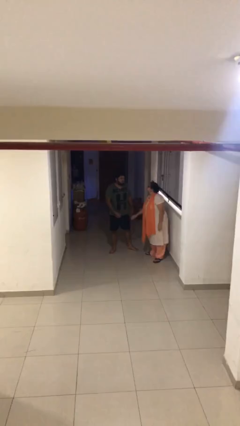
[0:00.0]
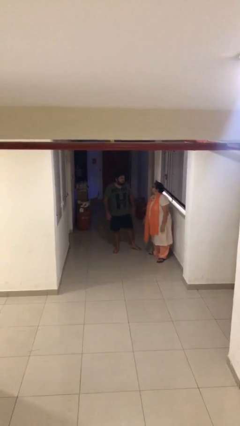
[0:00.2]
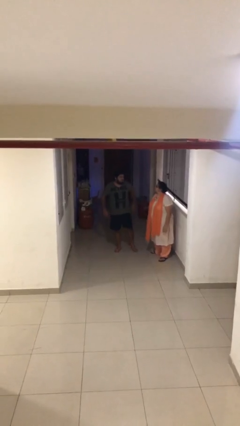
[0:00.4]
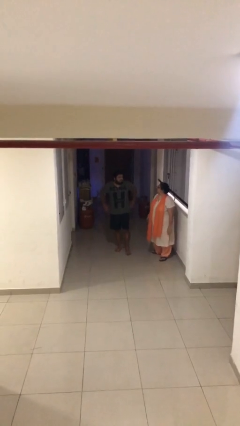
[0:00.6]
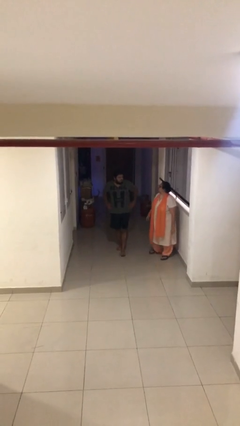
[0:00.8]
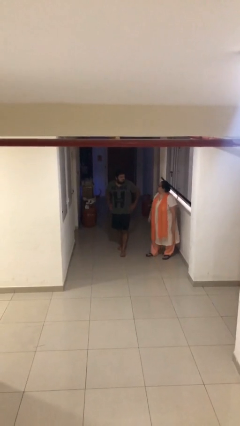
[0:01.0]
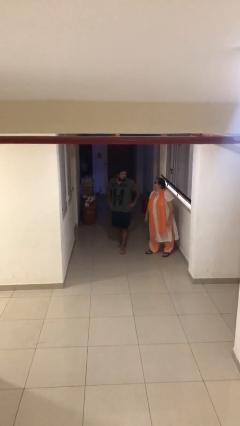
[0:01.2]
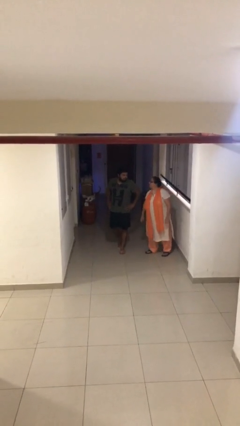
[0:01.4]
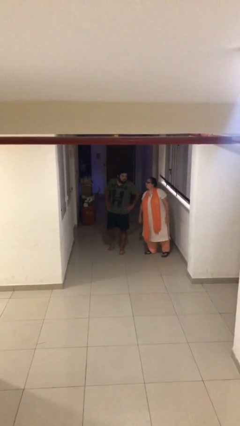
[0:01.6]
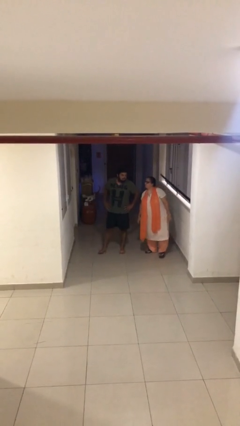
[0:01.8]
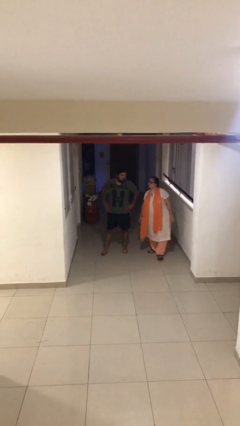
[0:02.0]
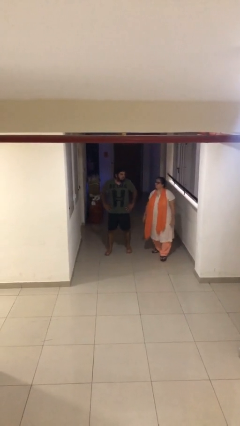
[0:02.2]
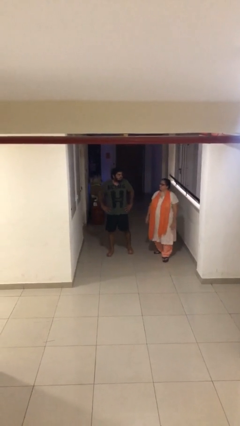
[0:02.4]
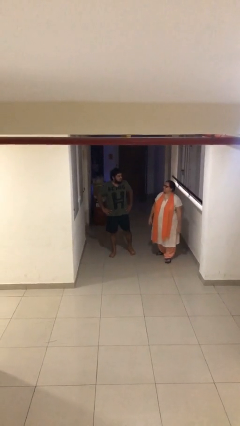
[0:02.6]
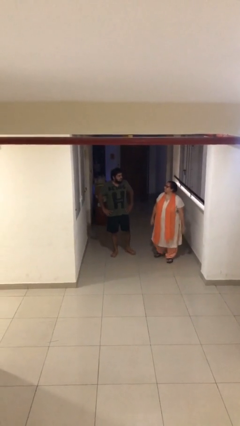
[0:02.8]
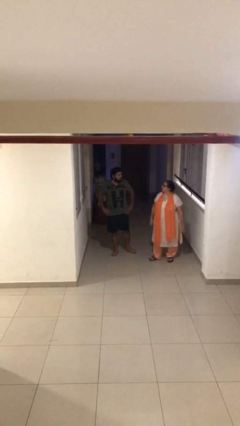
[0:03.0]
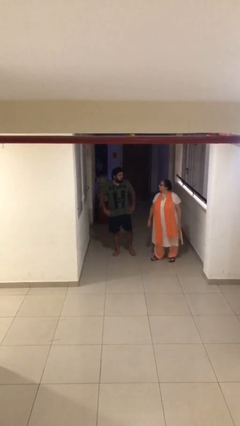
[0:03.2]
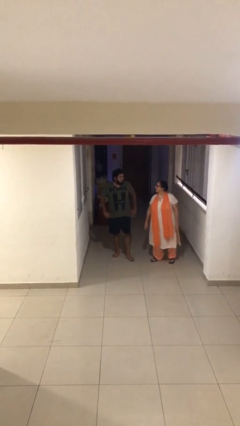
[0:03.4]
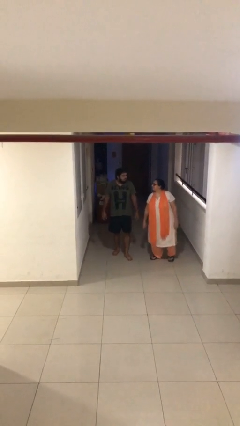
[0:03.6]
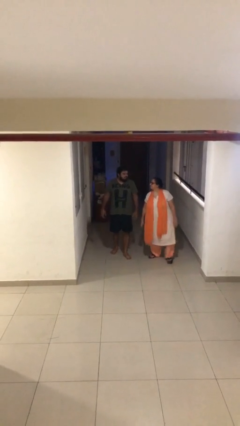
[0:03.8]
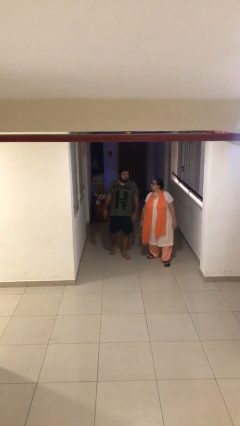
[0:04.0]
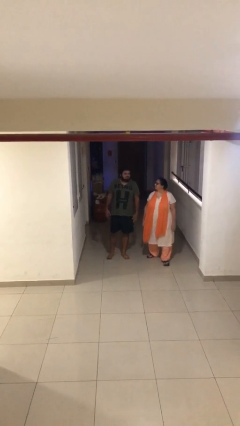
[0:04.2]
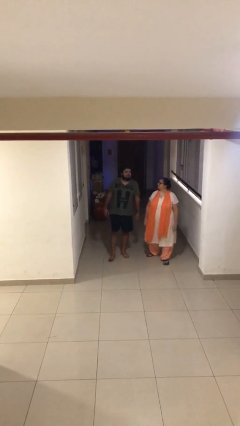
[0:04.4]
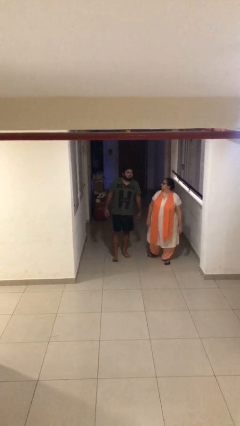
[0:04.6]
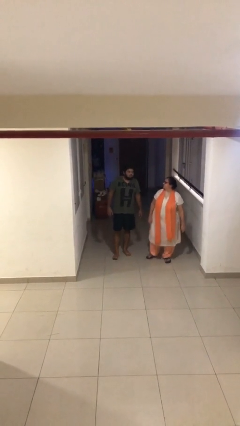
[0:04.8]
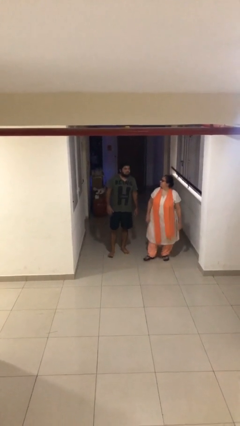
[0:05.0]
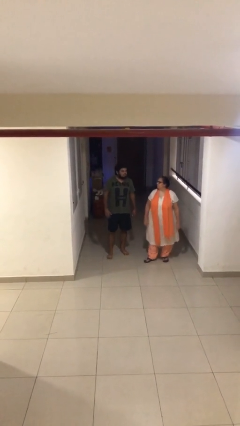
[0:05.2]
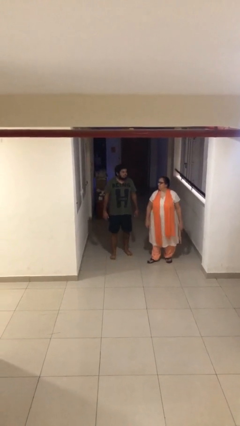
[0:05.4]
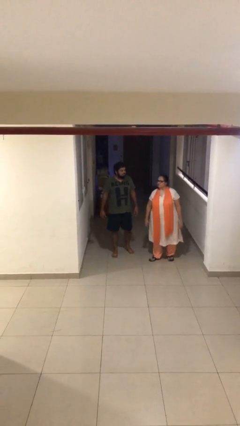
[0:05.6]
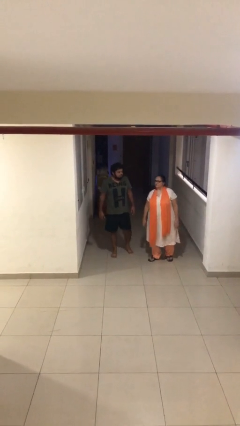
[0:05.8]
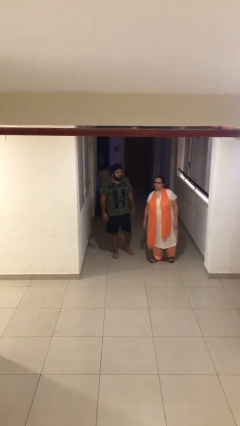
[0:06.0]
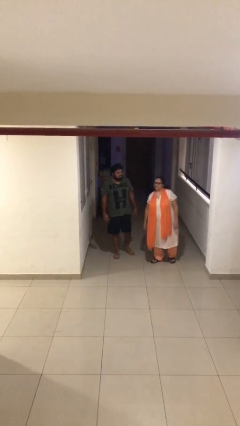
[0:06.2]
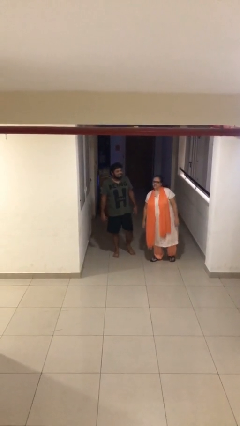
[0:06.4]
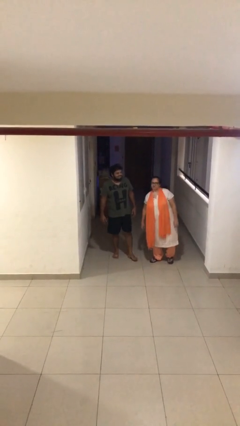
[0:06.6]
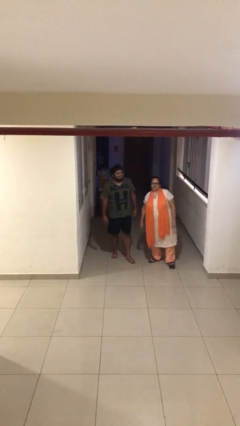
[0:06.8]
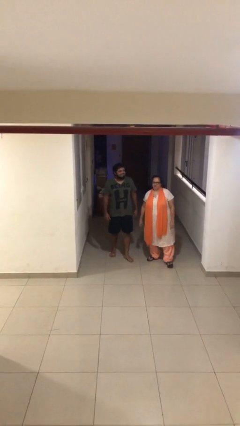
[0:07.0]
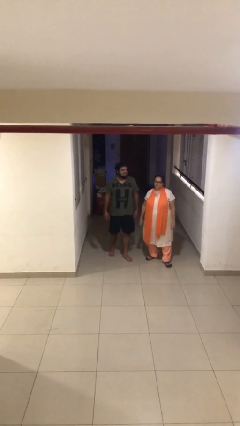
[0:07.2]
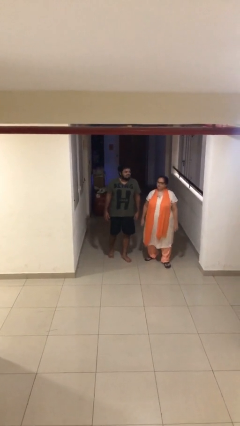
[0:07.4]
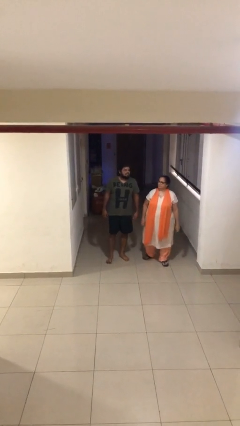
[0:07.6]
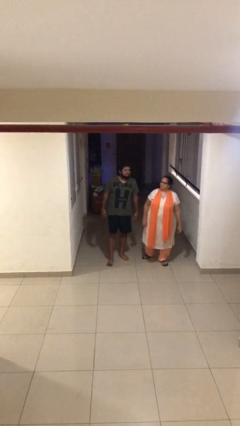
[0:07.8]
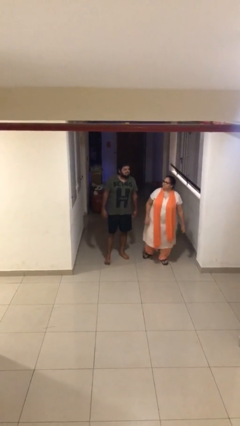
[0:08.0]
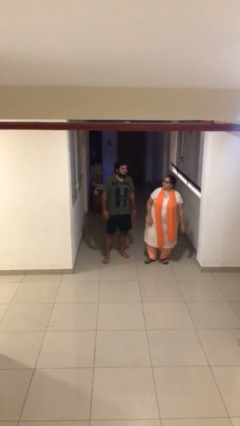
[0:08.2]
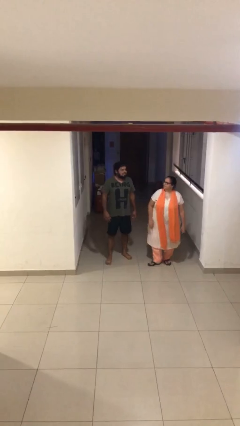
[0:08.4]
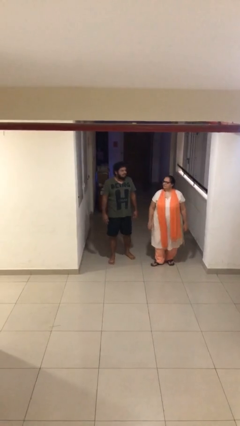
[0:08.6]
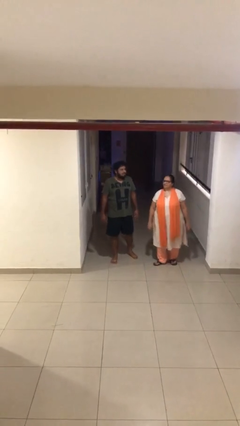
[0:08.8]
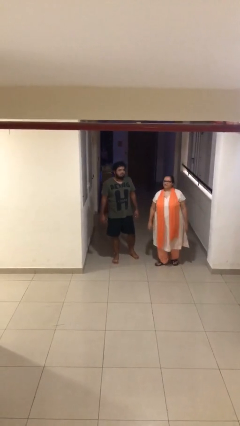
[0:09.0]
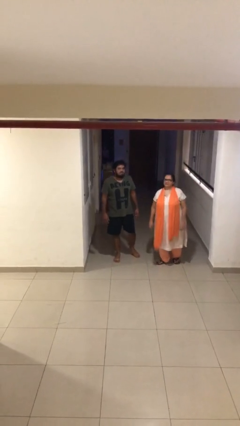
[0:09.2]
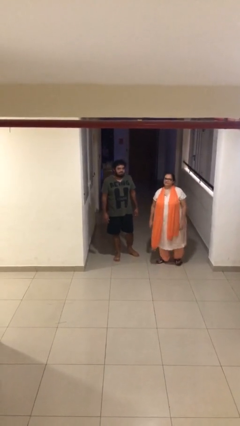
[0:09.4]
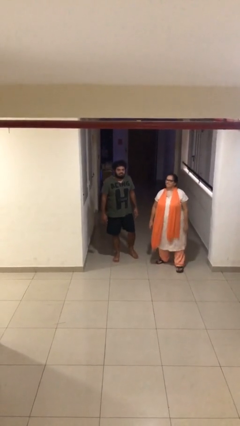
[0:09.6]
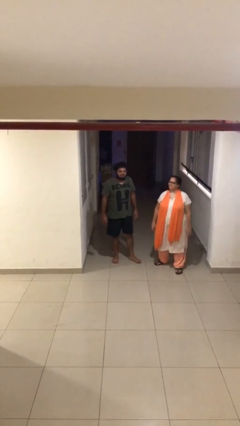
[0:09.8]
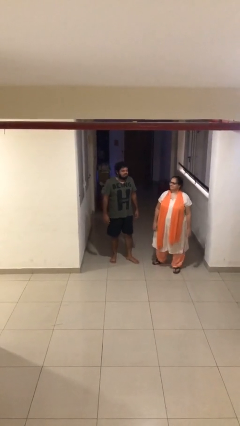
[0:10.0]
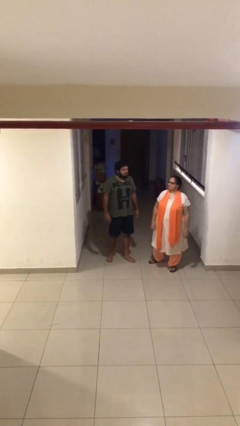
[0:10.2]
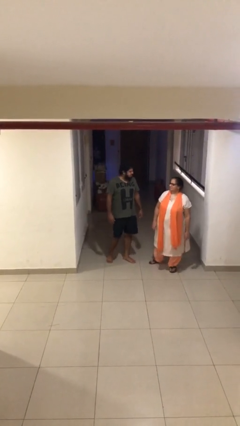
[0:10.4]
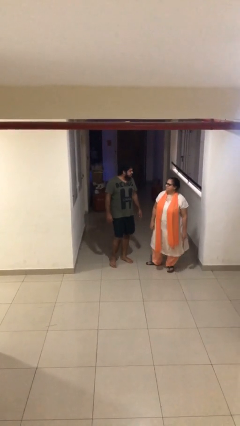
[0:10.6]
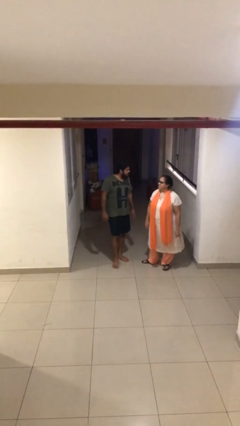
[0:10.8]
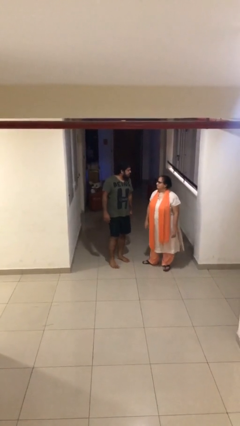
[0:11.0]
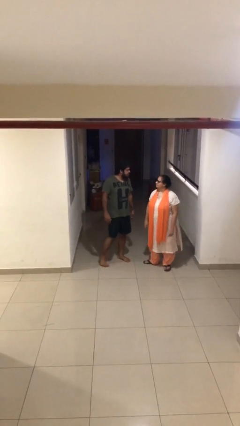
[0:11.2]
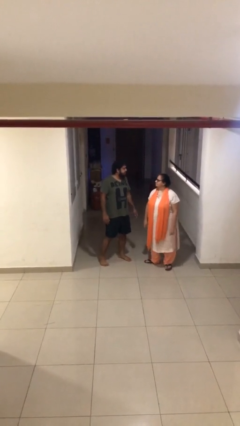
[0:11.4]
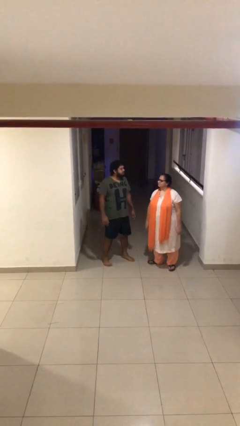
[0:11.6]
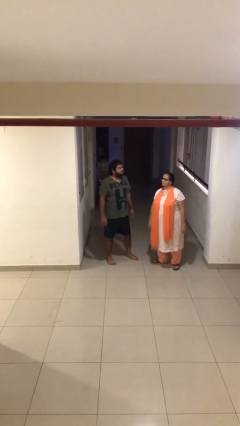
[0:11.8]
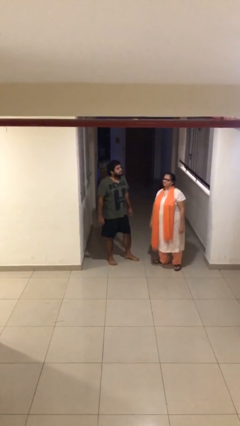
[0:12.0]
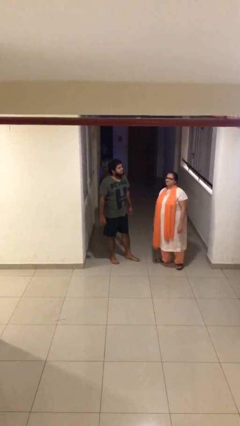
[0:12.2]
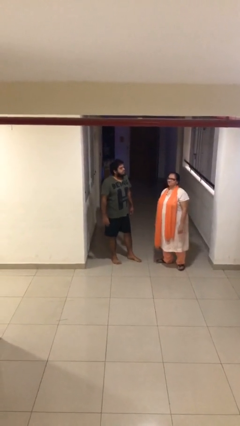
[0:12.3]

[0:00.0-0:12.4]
person talks to person

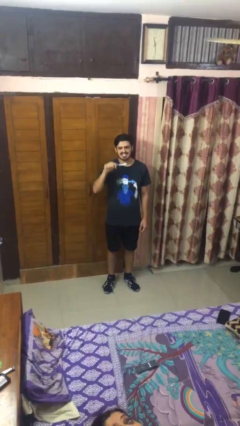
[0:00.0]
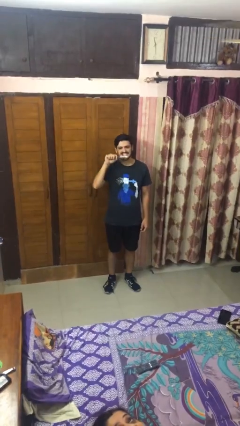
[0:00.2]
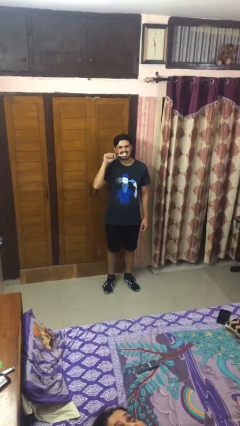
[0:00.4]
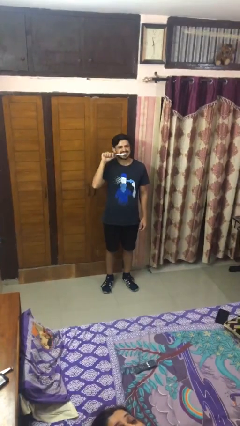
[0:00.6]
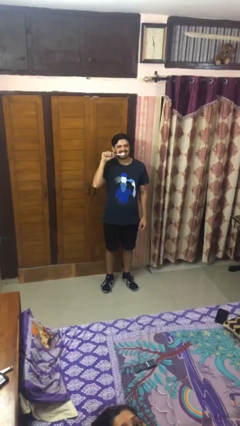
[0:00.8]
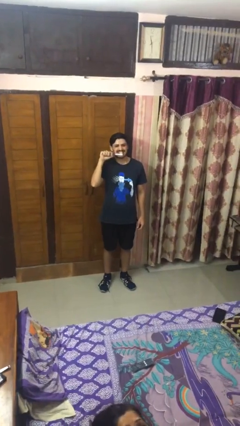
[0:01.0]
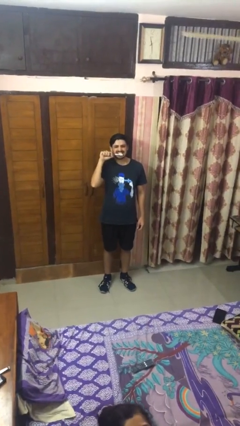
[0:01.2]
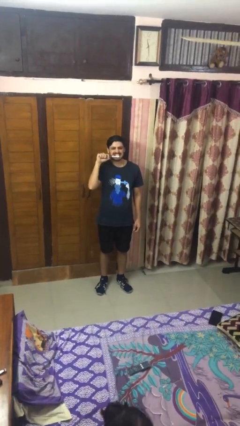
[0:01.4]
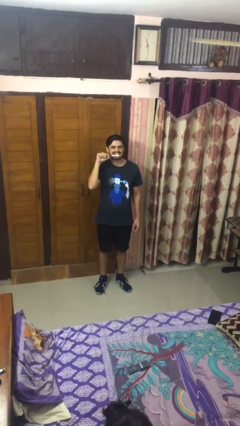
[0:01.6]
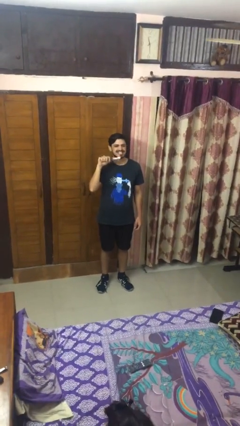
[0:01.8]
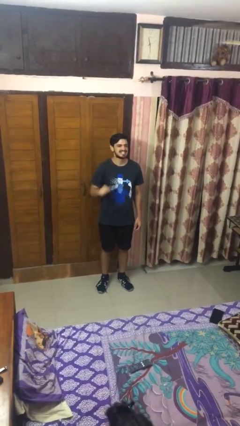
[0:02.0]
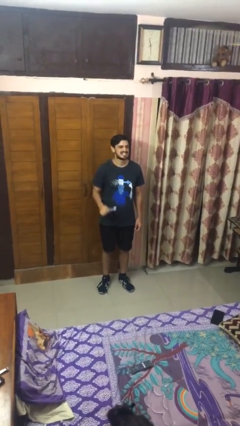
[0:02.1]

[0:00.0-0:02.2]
person brushes teeth

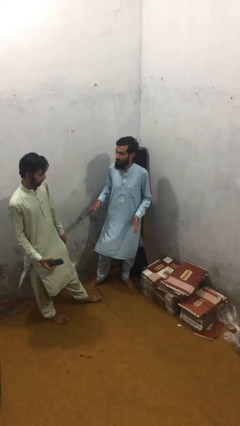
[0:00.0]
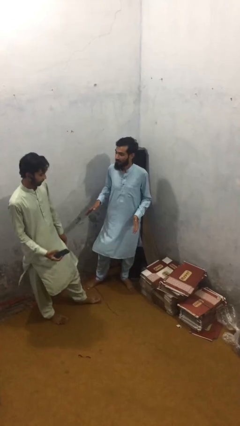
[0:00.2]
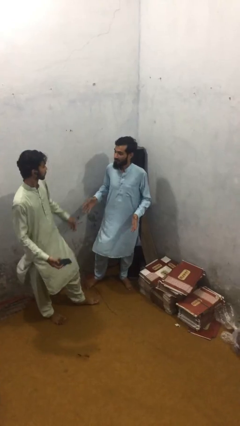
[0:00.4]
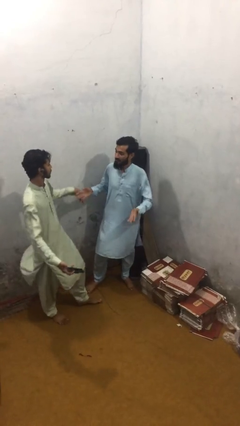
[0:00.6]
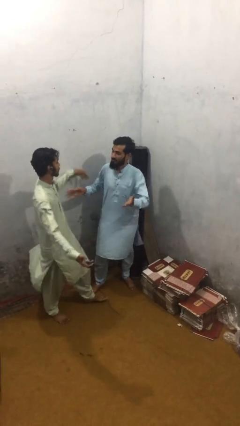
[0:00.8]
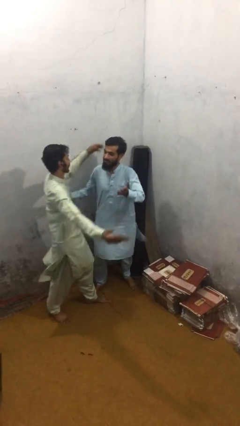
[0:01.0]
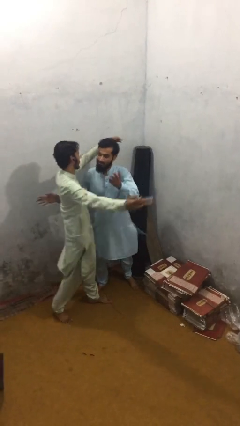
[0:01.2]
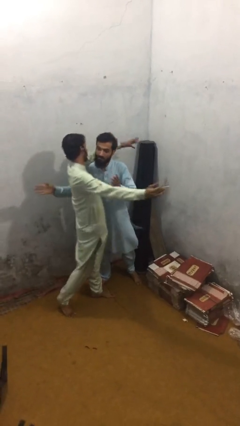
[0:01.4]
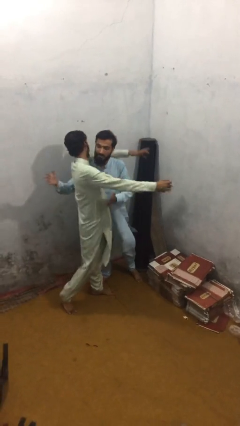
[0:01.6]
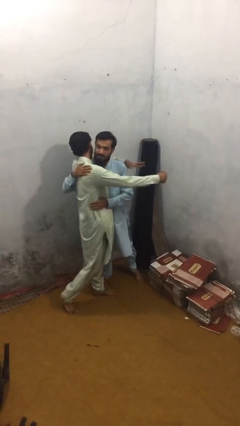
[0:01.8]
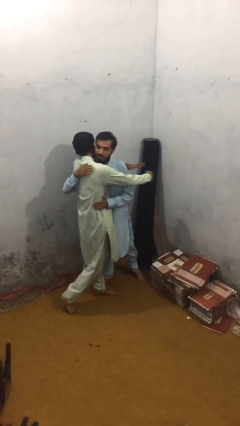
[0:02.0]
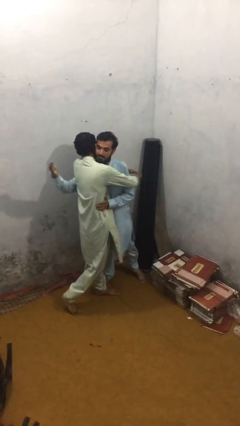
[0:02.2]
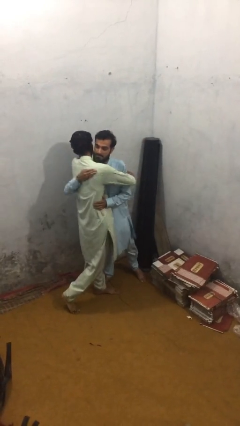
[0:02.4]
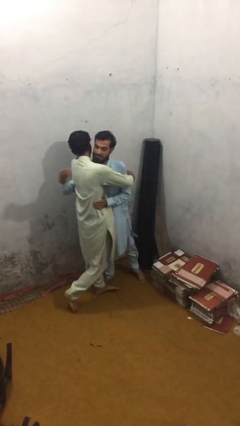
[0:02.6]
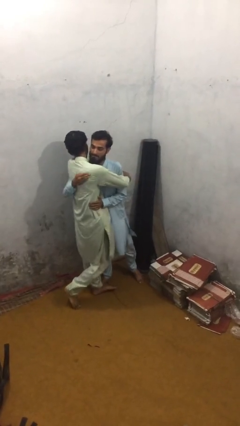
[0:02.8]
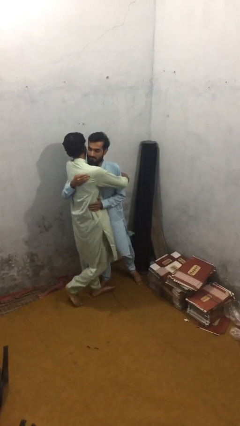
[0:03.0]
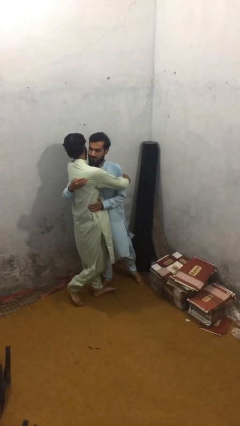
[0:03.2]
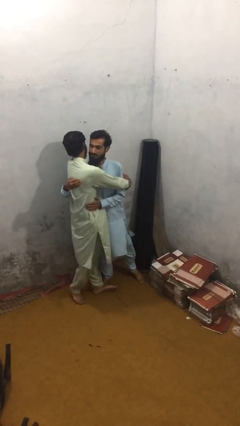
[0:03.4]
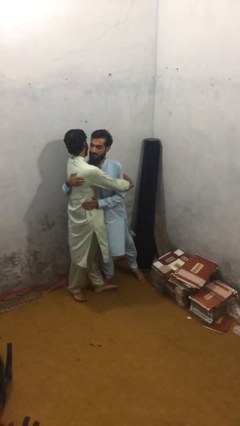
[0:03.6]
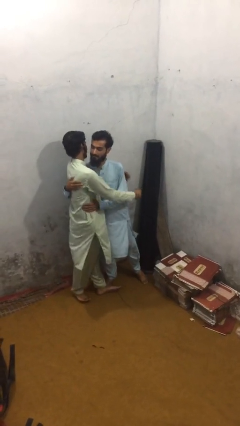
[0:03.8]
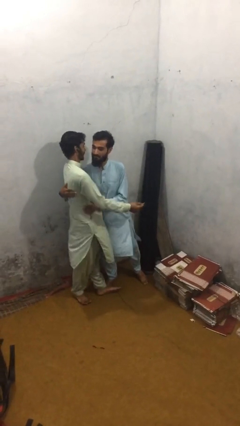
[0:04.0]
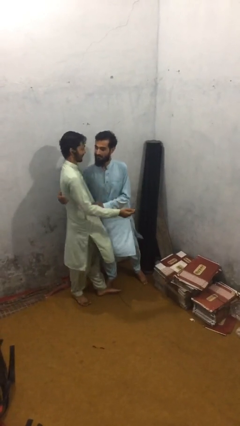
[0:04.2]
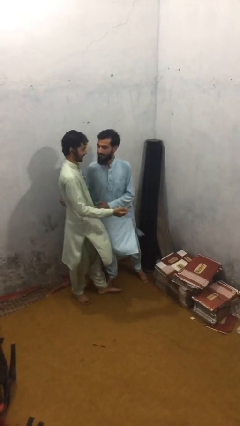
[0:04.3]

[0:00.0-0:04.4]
person embraces person
